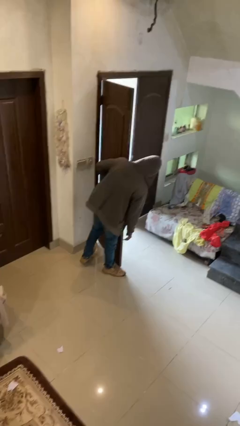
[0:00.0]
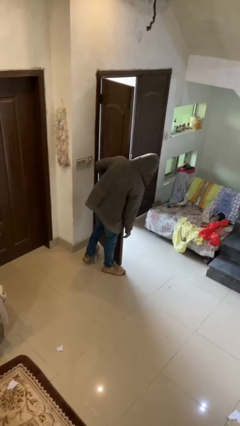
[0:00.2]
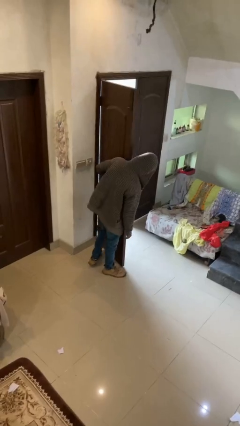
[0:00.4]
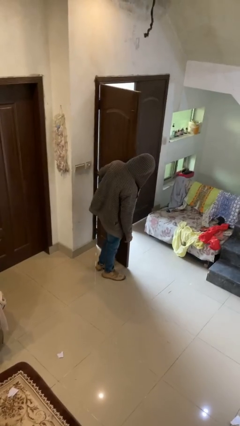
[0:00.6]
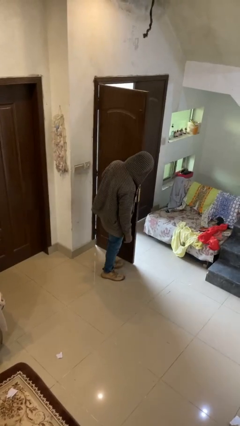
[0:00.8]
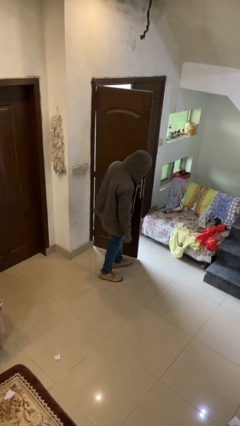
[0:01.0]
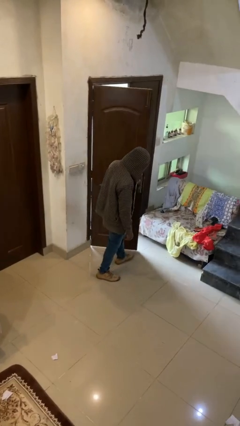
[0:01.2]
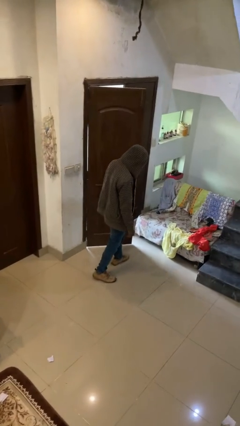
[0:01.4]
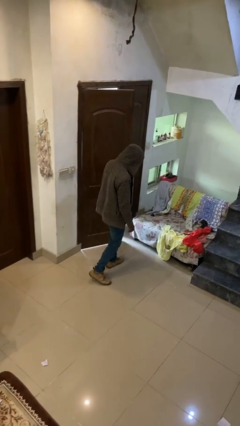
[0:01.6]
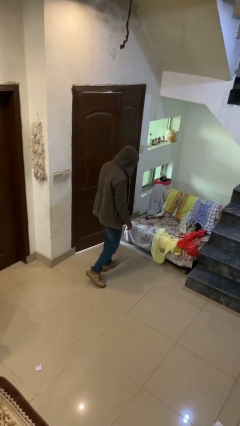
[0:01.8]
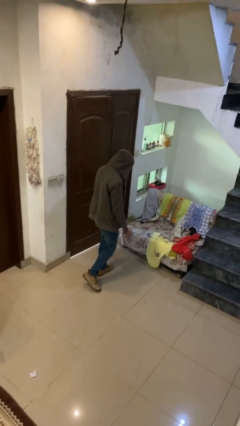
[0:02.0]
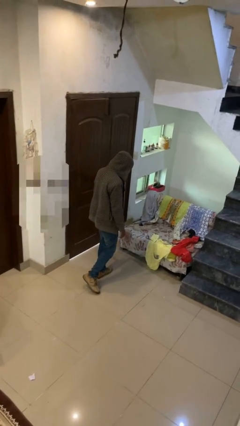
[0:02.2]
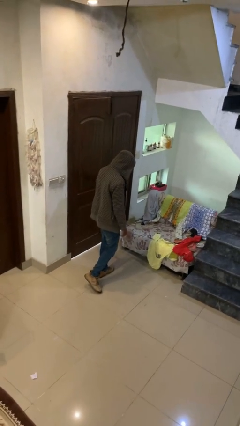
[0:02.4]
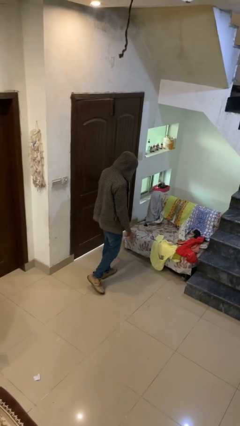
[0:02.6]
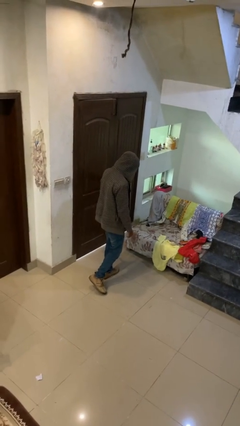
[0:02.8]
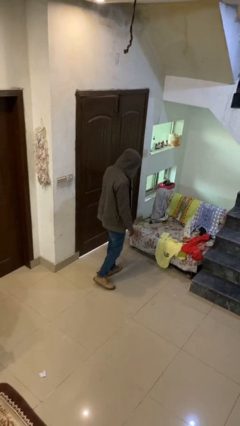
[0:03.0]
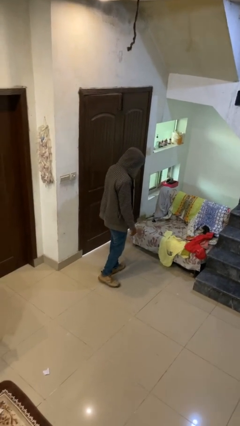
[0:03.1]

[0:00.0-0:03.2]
person closes facility door

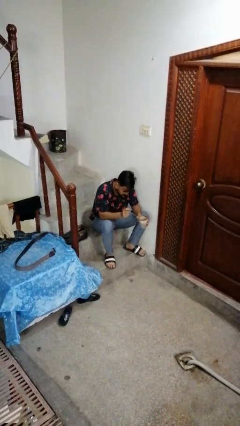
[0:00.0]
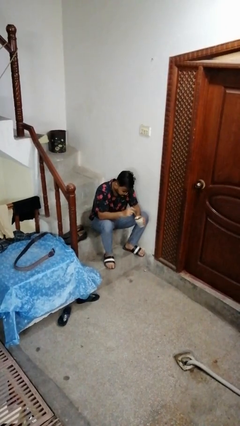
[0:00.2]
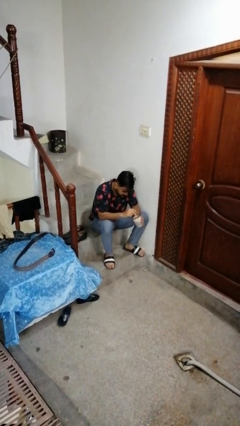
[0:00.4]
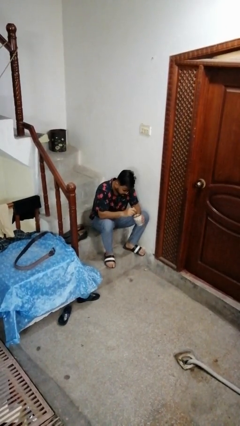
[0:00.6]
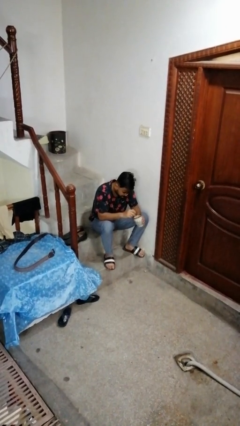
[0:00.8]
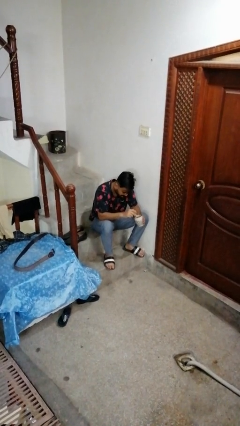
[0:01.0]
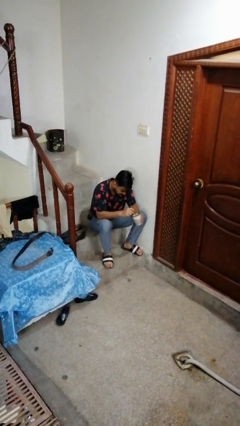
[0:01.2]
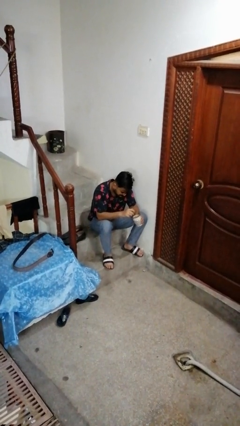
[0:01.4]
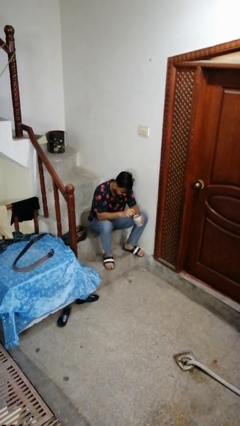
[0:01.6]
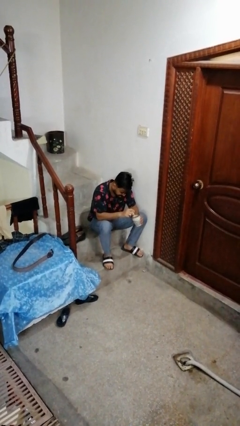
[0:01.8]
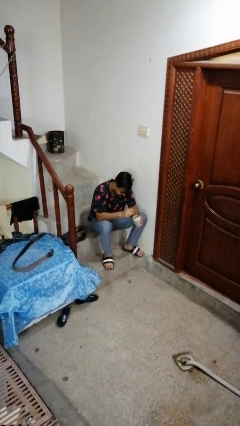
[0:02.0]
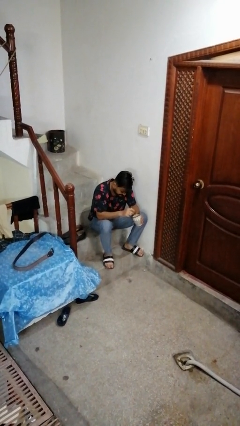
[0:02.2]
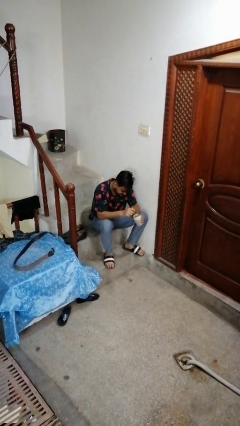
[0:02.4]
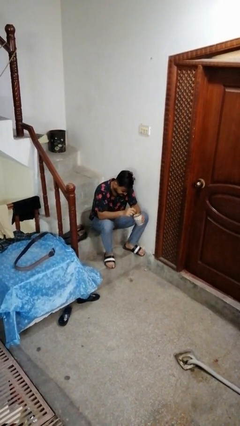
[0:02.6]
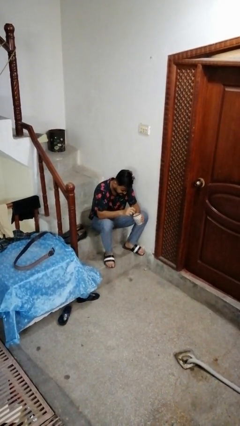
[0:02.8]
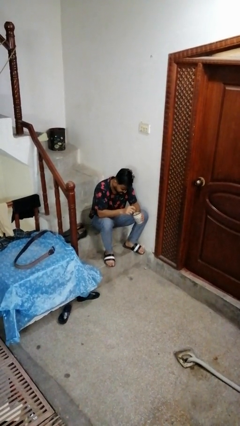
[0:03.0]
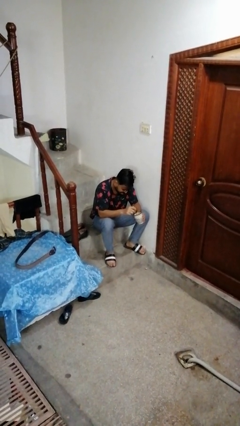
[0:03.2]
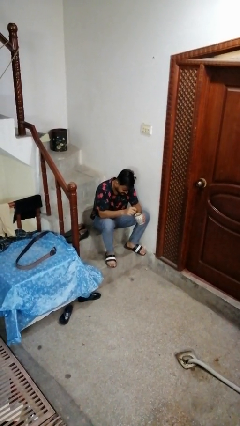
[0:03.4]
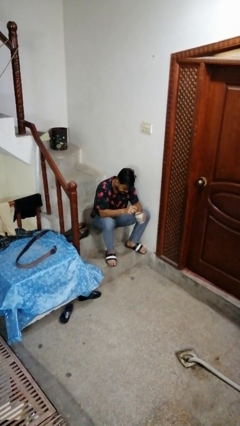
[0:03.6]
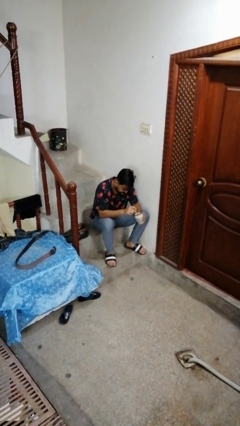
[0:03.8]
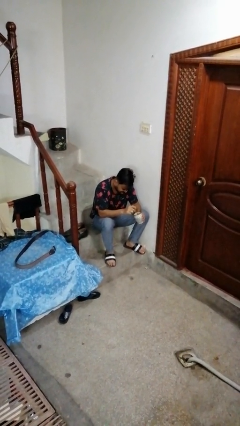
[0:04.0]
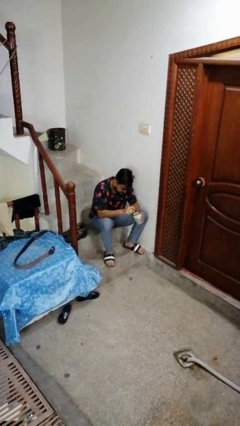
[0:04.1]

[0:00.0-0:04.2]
person stirs mug

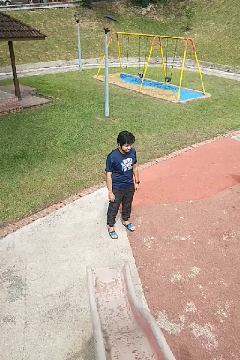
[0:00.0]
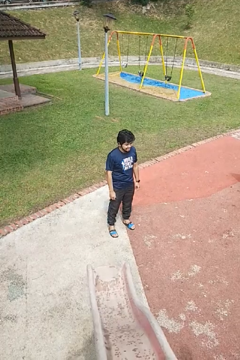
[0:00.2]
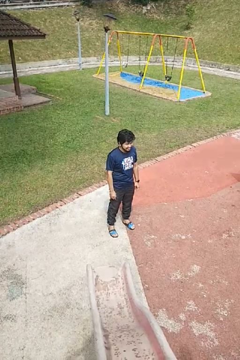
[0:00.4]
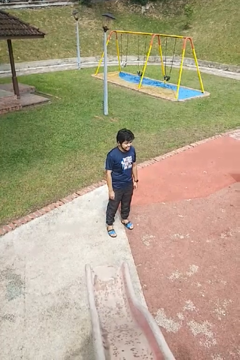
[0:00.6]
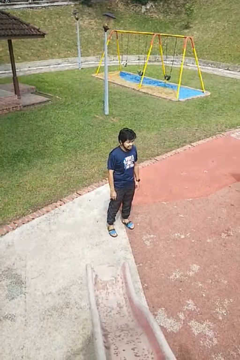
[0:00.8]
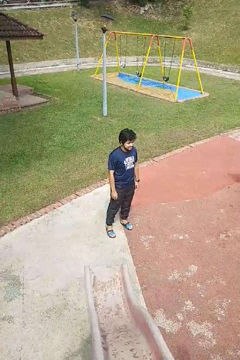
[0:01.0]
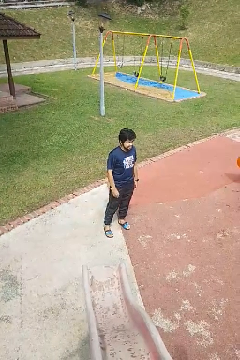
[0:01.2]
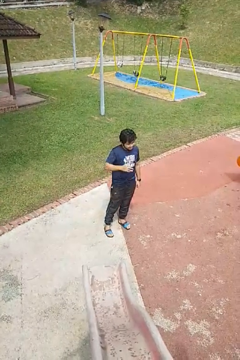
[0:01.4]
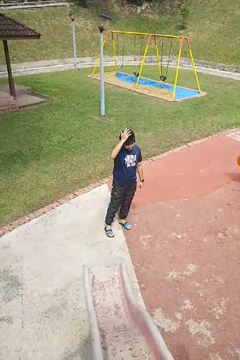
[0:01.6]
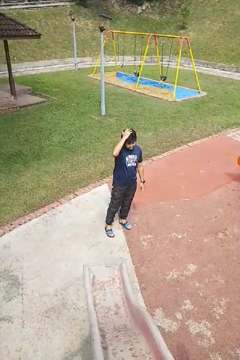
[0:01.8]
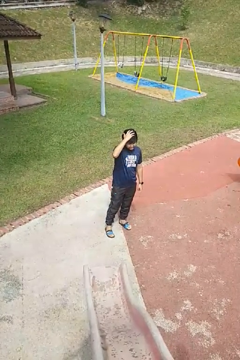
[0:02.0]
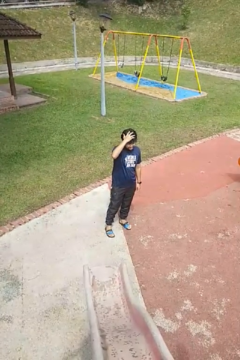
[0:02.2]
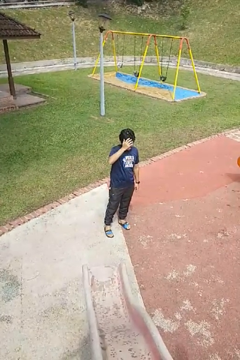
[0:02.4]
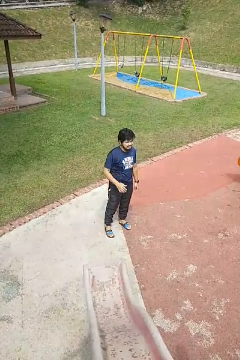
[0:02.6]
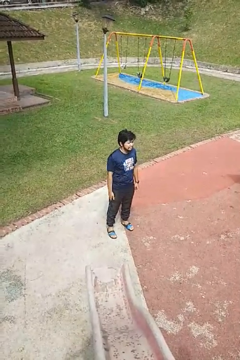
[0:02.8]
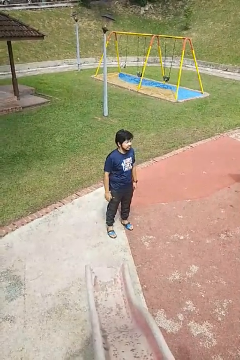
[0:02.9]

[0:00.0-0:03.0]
person pats head

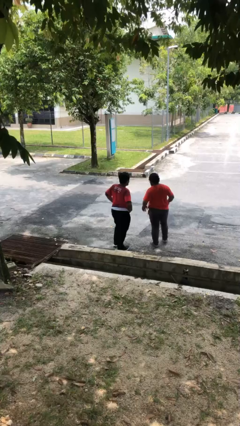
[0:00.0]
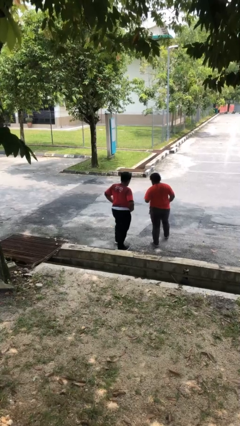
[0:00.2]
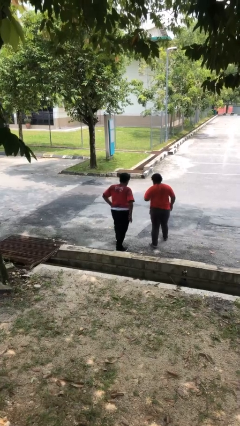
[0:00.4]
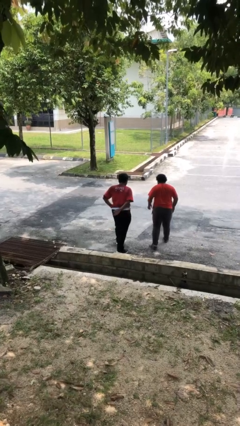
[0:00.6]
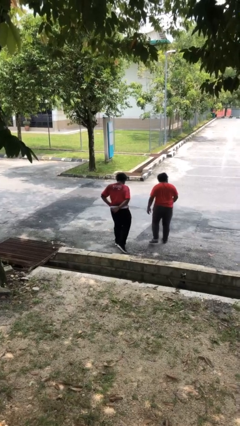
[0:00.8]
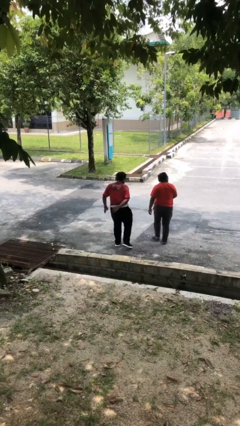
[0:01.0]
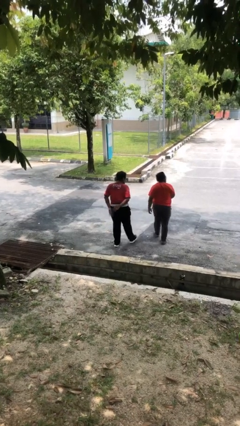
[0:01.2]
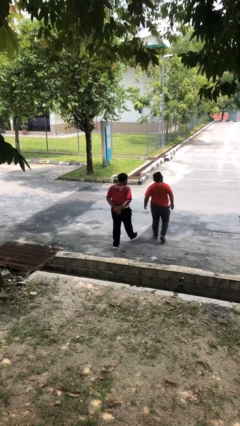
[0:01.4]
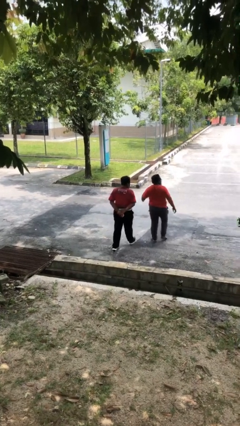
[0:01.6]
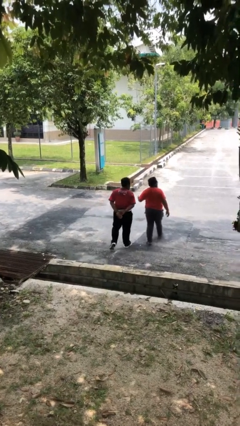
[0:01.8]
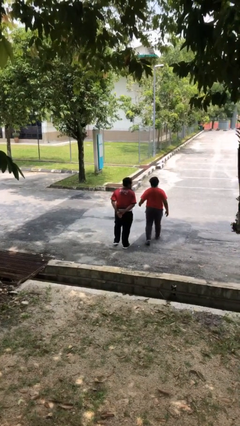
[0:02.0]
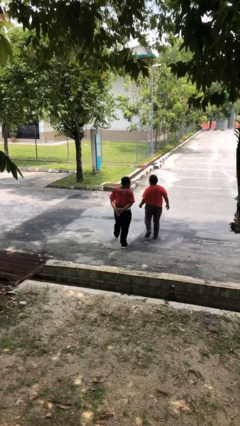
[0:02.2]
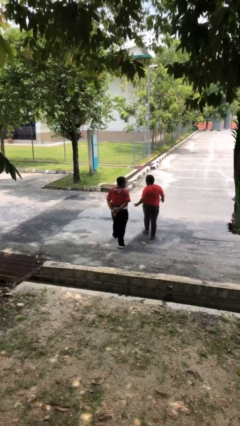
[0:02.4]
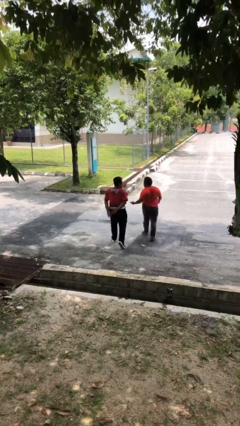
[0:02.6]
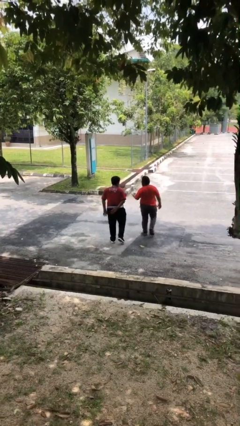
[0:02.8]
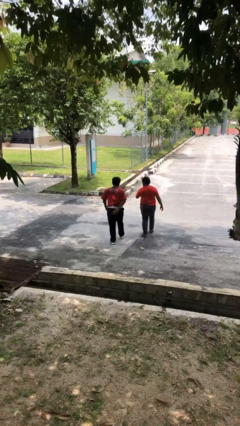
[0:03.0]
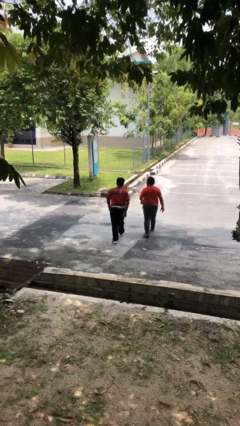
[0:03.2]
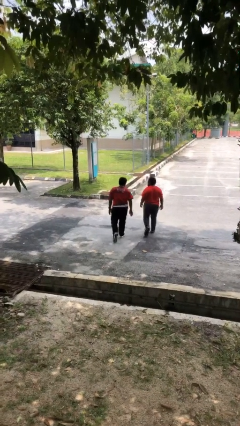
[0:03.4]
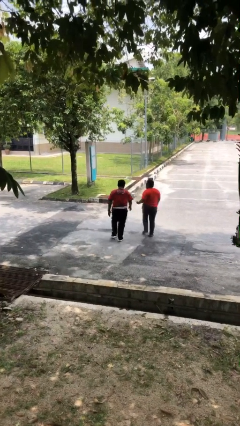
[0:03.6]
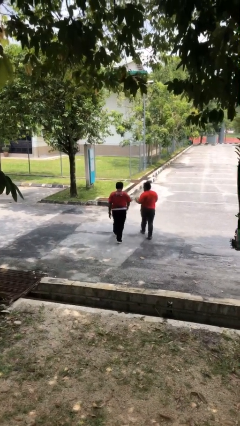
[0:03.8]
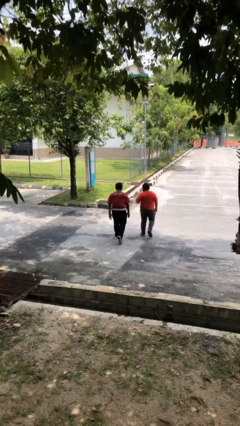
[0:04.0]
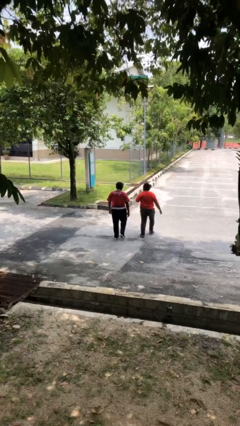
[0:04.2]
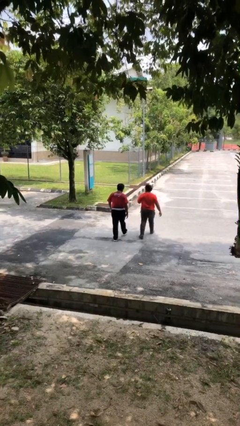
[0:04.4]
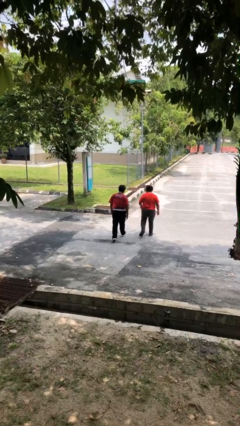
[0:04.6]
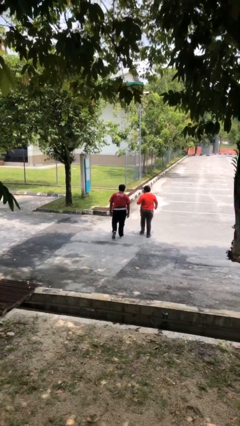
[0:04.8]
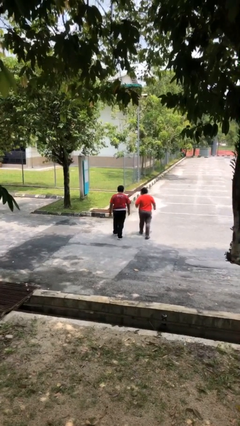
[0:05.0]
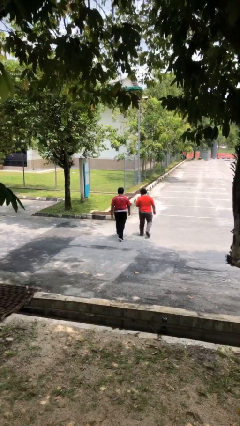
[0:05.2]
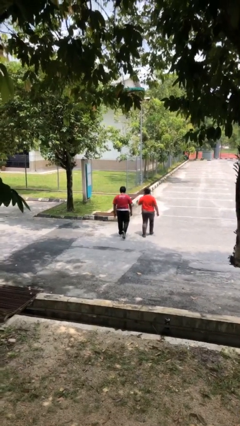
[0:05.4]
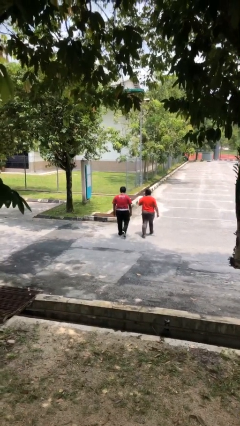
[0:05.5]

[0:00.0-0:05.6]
person talks to person

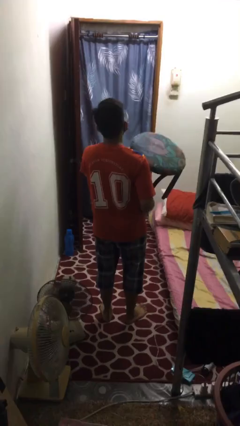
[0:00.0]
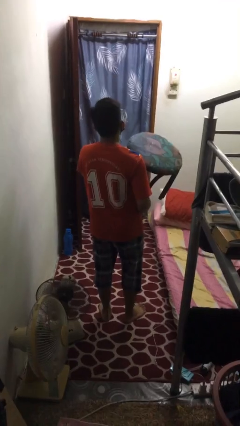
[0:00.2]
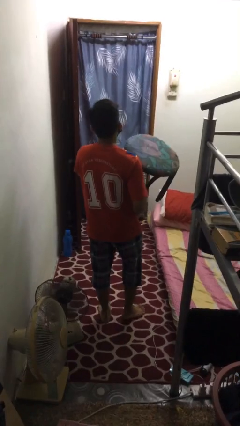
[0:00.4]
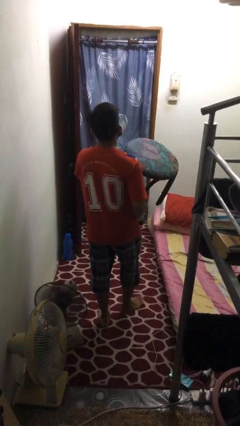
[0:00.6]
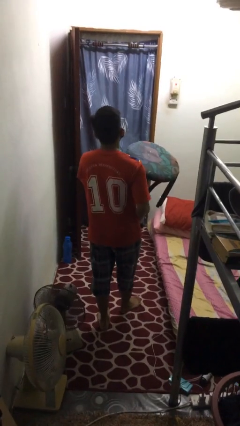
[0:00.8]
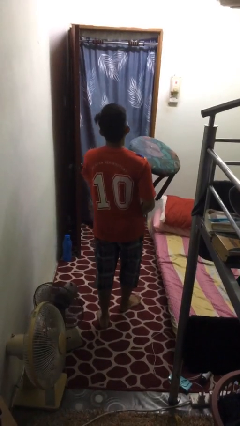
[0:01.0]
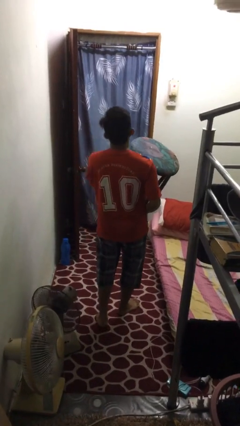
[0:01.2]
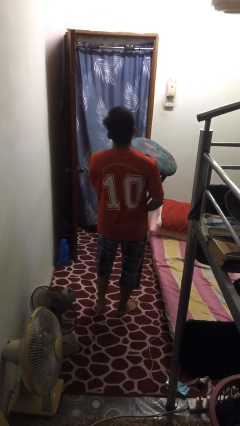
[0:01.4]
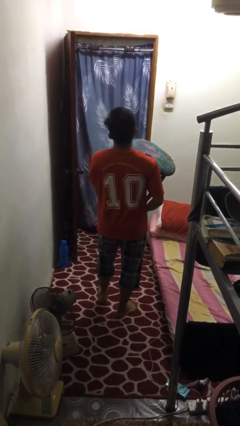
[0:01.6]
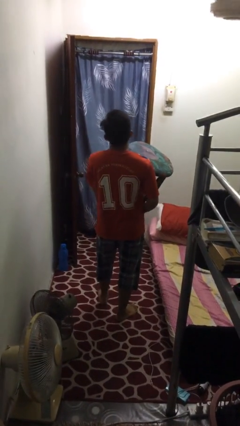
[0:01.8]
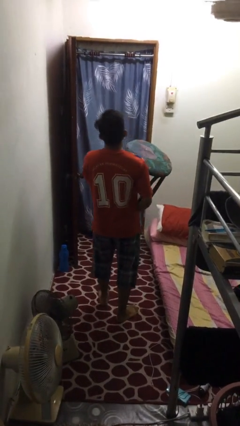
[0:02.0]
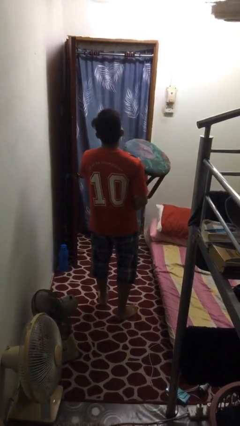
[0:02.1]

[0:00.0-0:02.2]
person carries furniture

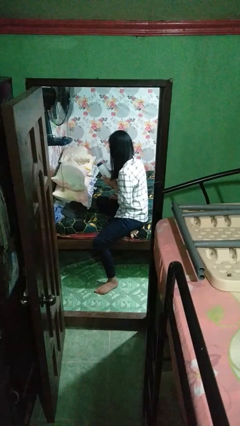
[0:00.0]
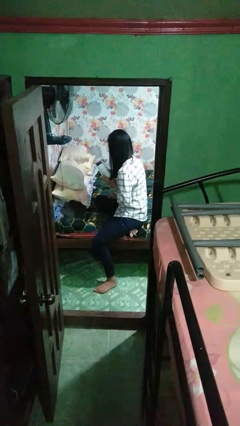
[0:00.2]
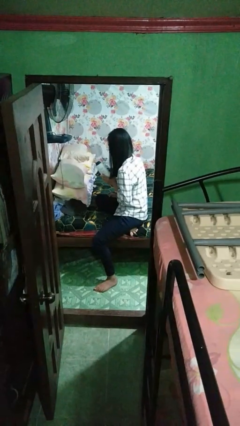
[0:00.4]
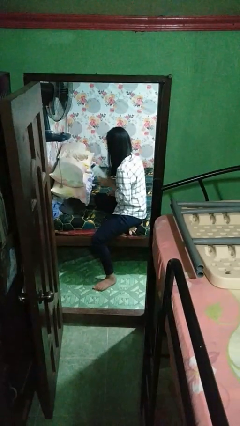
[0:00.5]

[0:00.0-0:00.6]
person puts down object on bed
